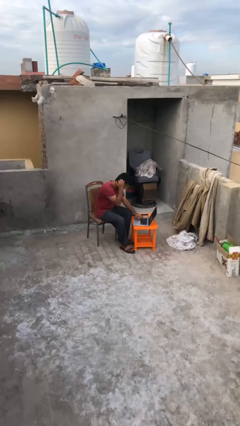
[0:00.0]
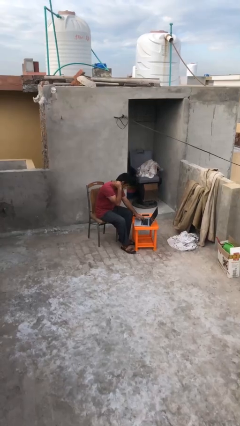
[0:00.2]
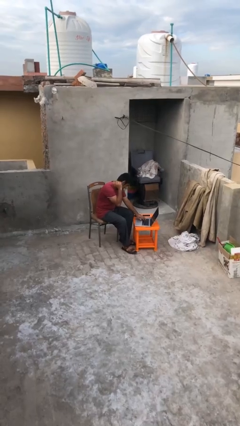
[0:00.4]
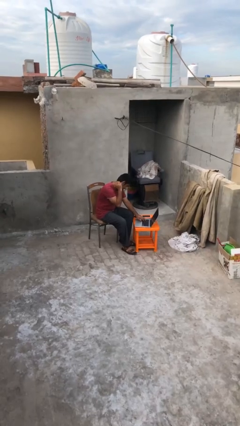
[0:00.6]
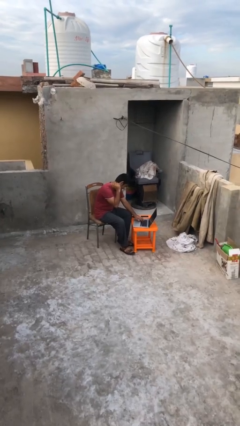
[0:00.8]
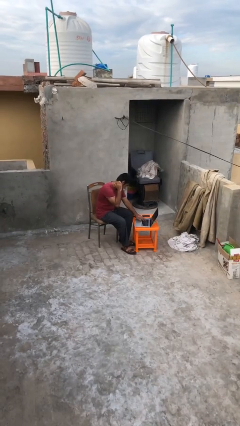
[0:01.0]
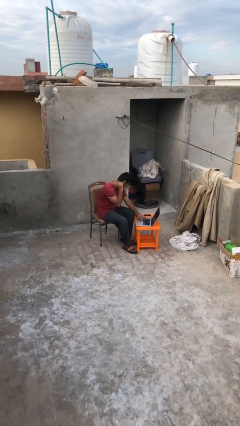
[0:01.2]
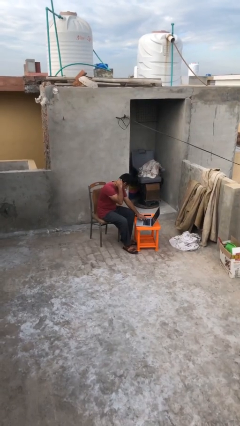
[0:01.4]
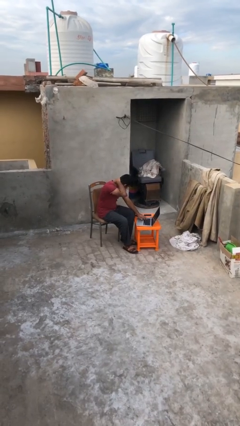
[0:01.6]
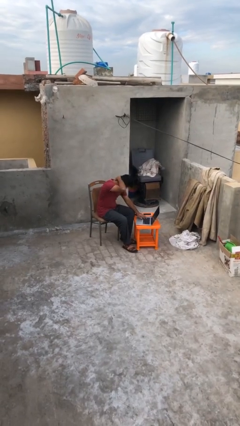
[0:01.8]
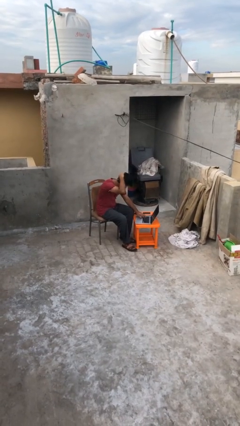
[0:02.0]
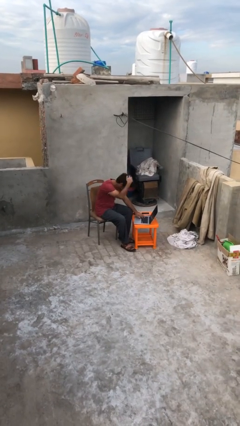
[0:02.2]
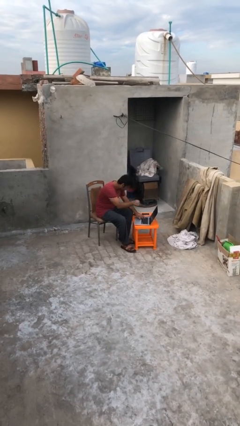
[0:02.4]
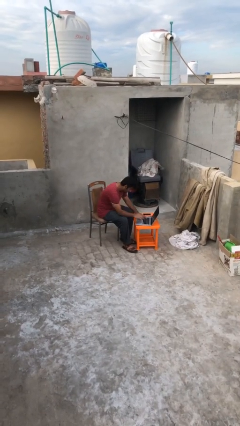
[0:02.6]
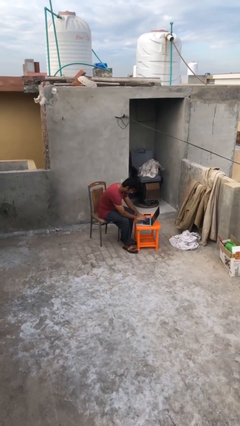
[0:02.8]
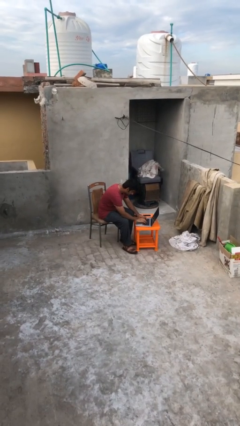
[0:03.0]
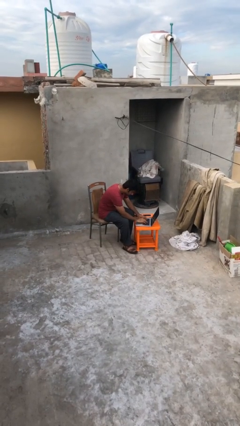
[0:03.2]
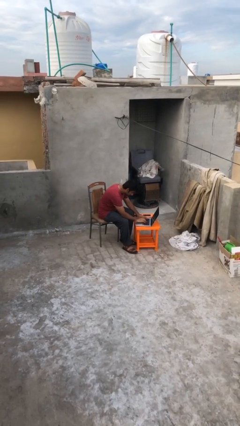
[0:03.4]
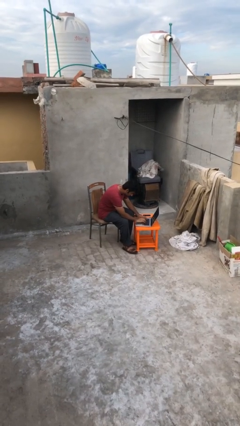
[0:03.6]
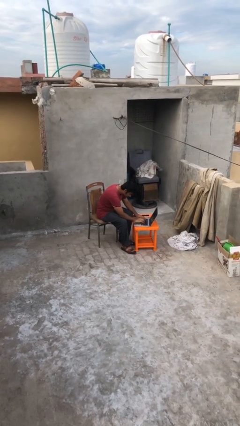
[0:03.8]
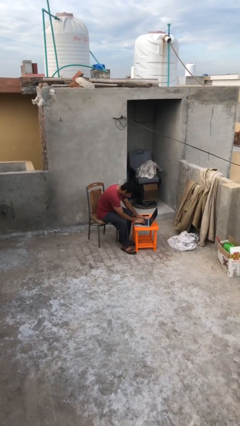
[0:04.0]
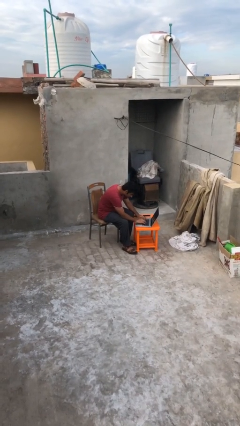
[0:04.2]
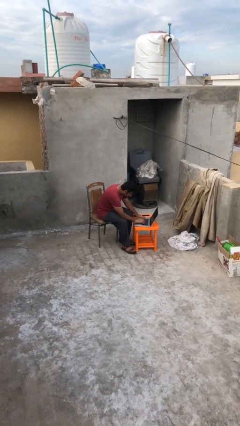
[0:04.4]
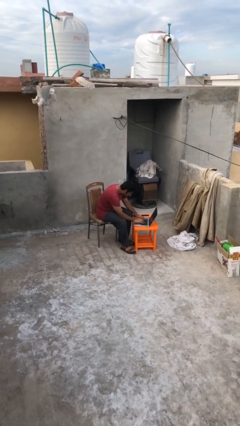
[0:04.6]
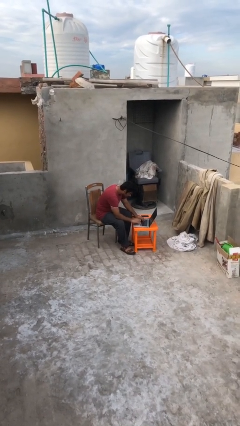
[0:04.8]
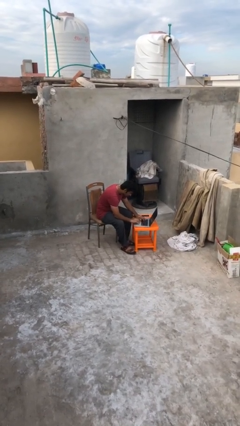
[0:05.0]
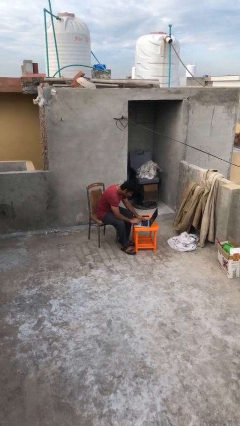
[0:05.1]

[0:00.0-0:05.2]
person interacts with laptop

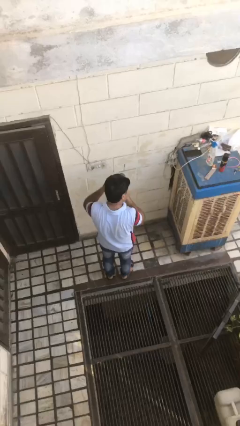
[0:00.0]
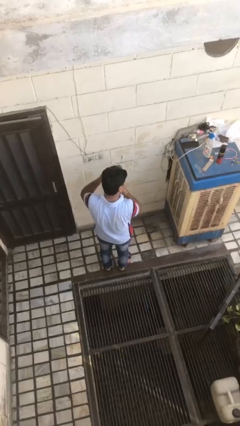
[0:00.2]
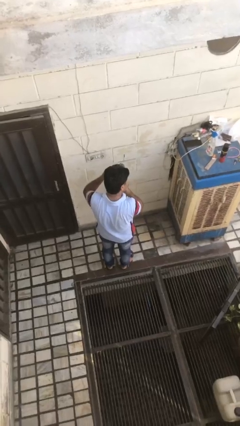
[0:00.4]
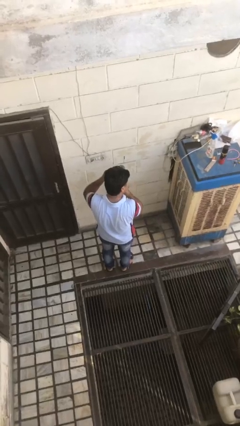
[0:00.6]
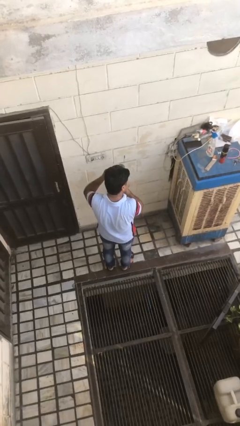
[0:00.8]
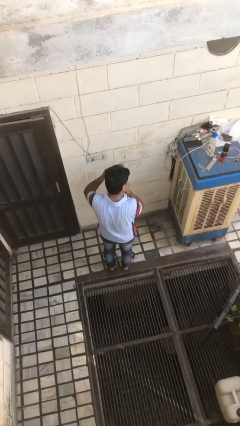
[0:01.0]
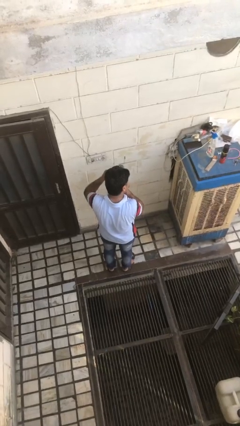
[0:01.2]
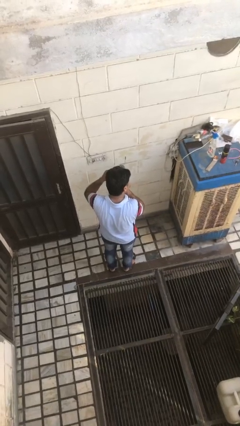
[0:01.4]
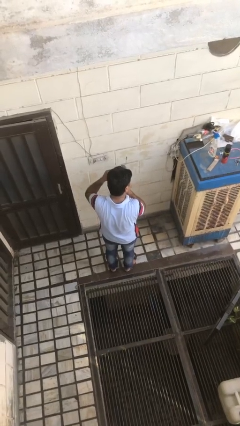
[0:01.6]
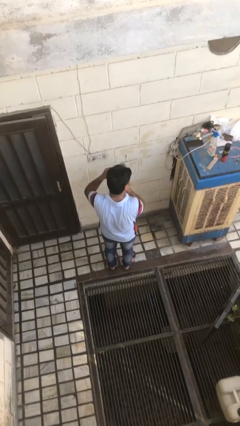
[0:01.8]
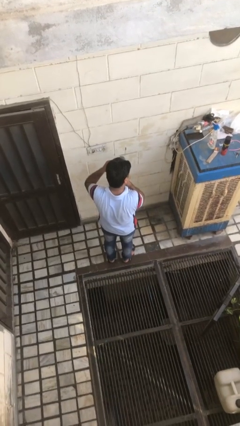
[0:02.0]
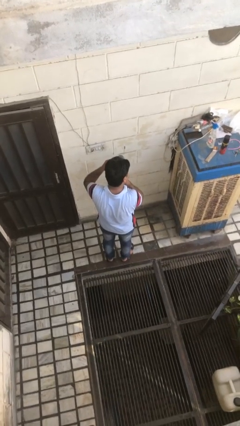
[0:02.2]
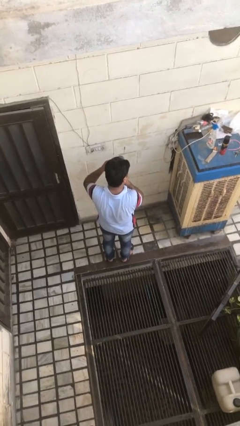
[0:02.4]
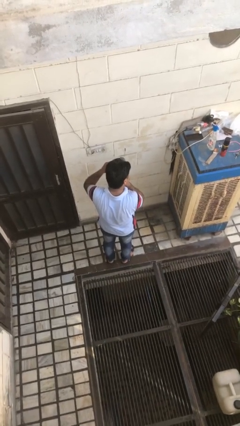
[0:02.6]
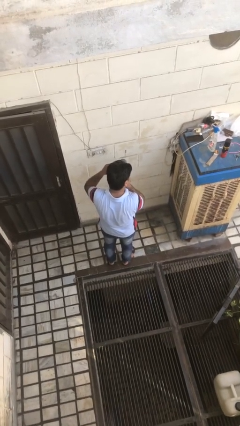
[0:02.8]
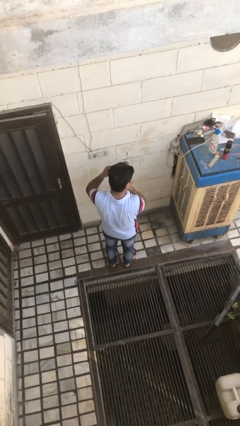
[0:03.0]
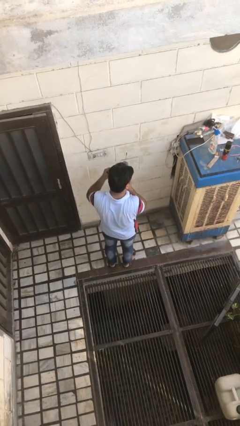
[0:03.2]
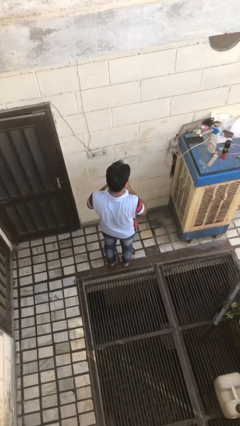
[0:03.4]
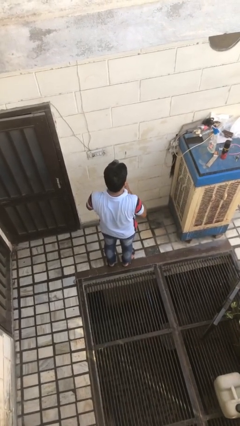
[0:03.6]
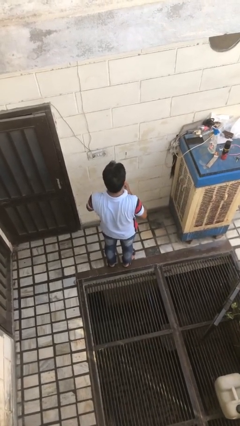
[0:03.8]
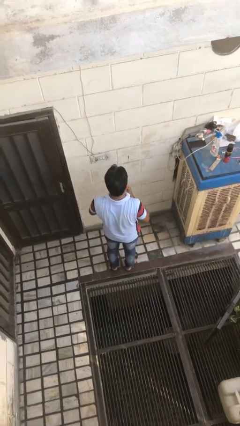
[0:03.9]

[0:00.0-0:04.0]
person applies eye makeup

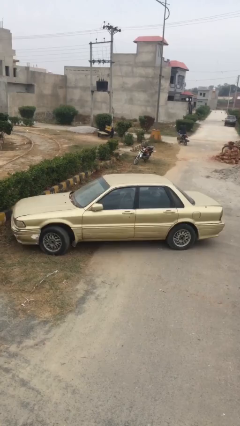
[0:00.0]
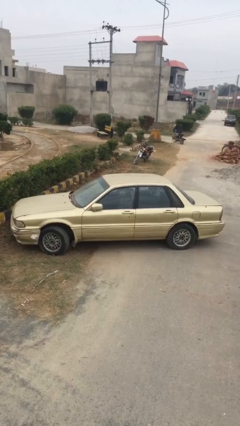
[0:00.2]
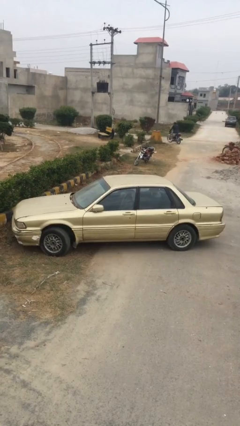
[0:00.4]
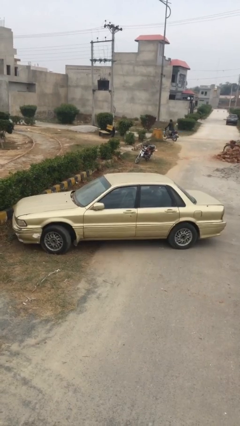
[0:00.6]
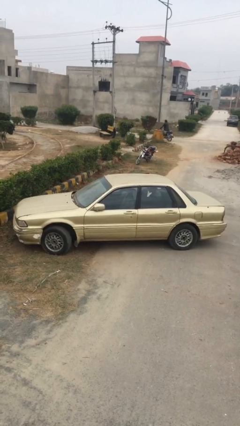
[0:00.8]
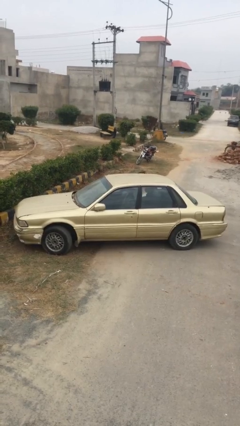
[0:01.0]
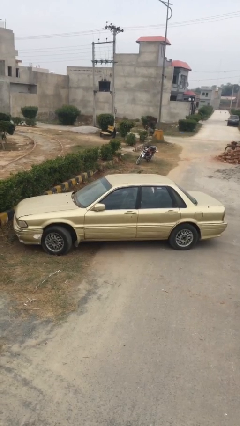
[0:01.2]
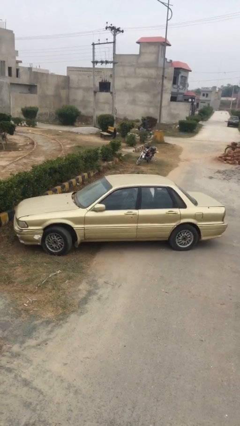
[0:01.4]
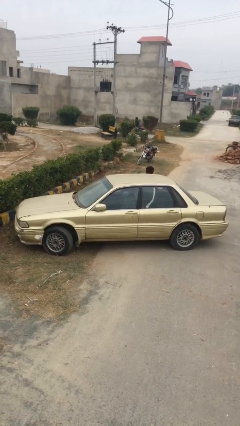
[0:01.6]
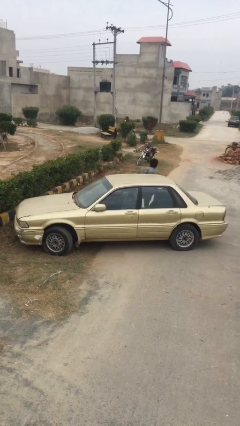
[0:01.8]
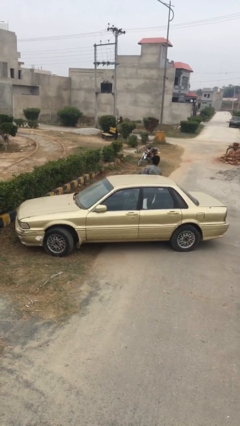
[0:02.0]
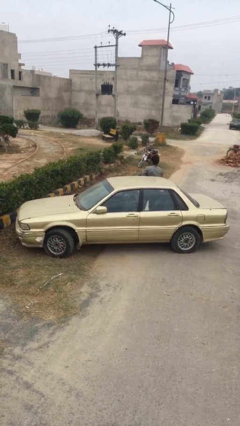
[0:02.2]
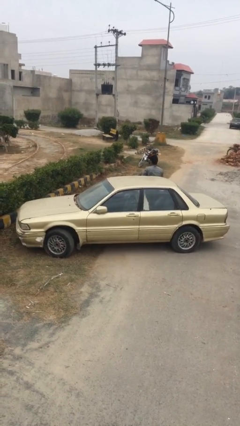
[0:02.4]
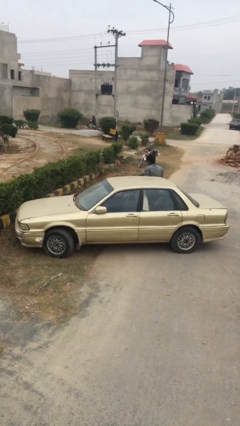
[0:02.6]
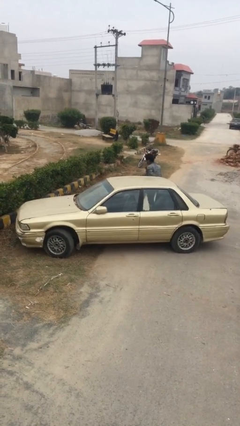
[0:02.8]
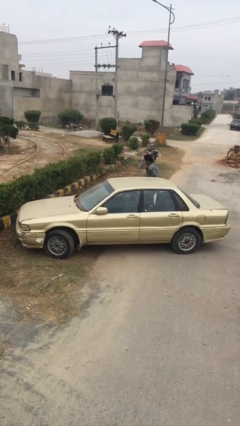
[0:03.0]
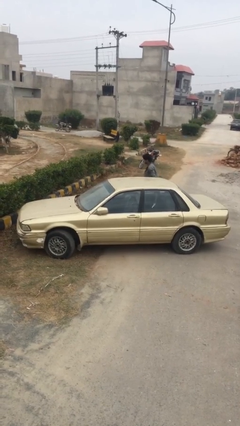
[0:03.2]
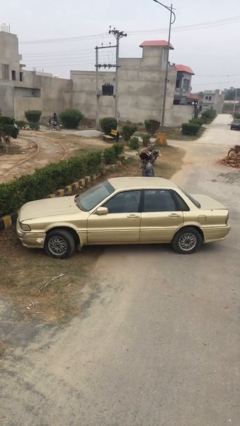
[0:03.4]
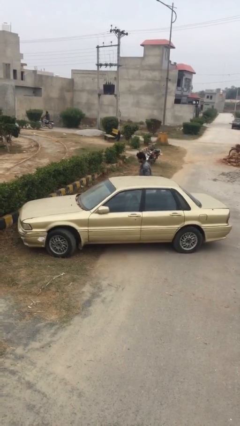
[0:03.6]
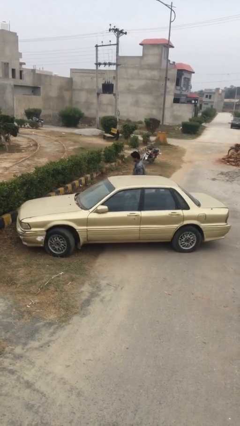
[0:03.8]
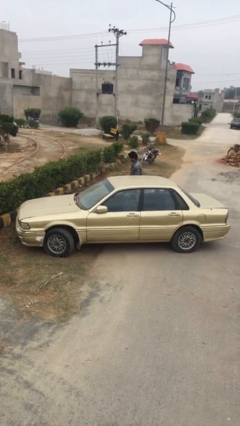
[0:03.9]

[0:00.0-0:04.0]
car drops off person

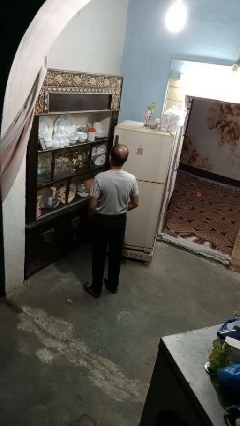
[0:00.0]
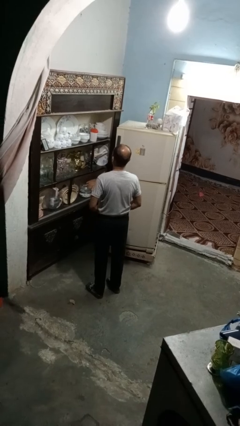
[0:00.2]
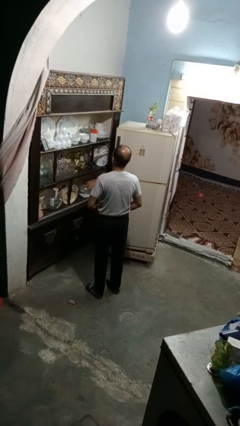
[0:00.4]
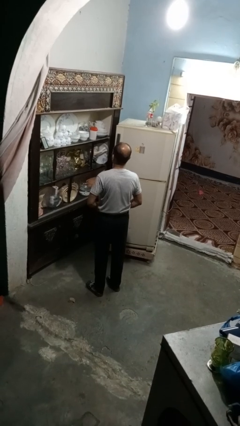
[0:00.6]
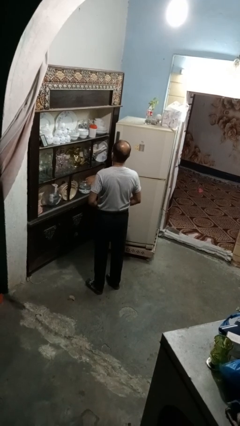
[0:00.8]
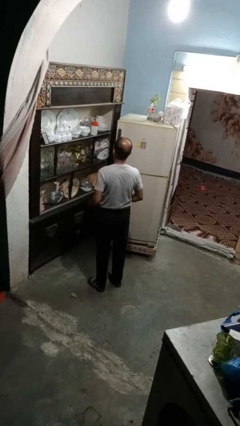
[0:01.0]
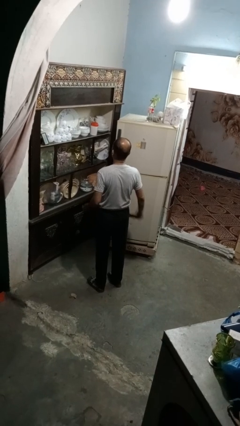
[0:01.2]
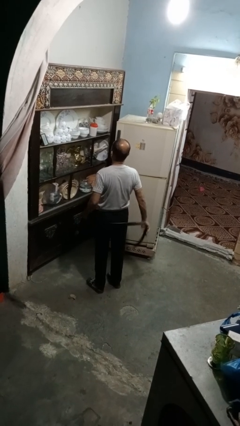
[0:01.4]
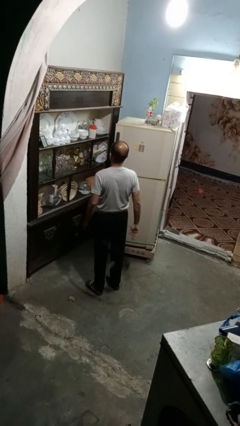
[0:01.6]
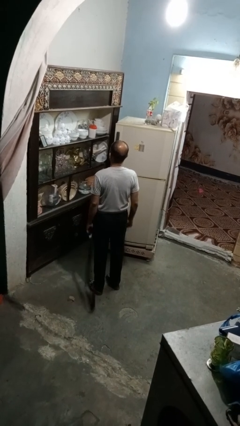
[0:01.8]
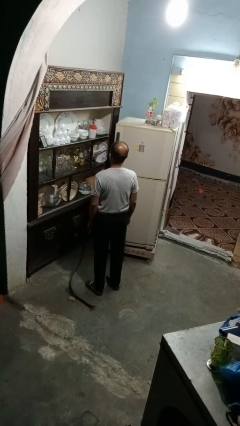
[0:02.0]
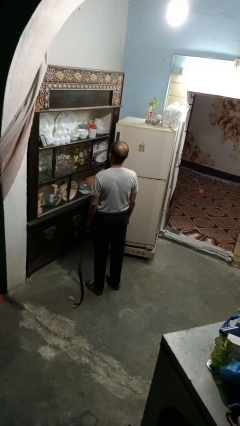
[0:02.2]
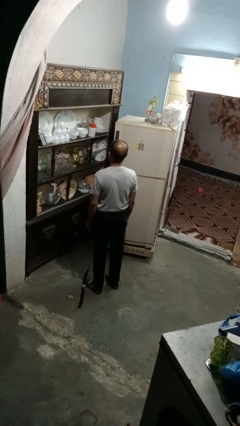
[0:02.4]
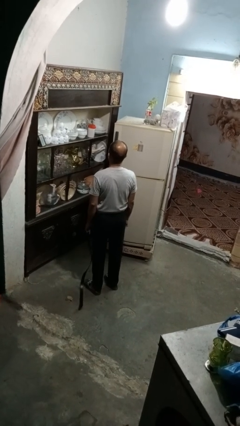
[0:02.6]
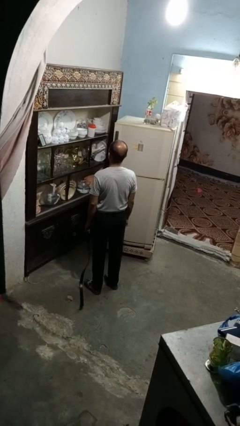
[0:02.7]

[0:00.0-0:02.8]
person takes off belt

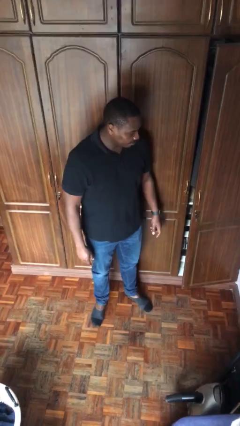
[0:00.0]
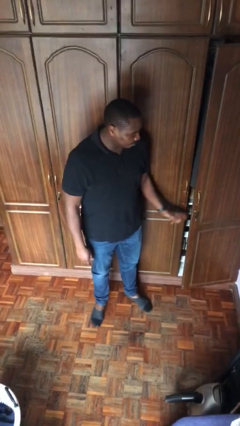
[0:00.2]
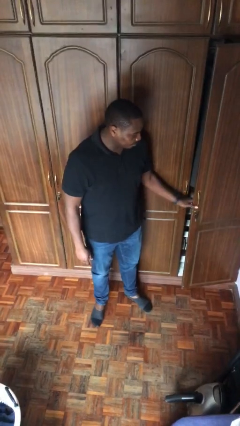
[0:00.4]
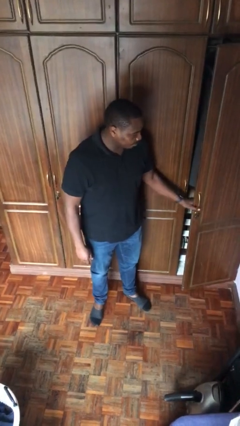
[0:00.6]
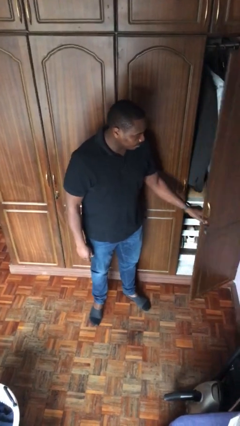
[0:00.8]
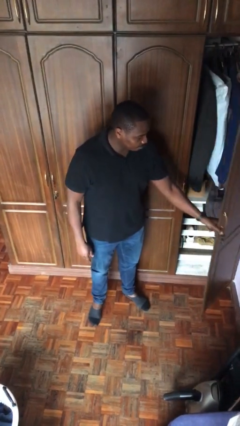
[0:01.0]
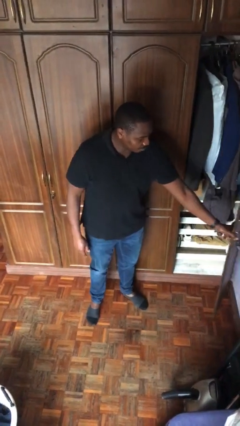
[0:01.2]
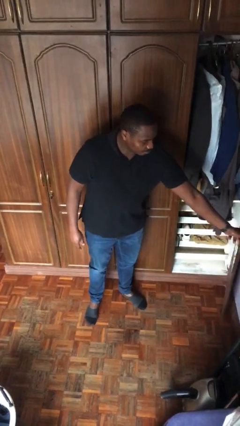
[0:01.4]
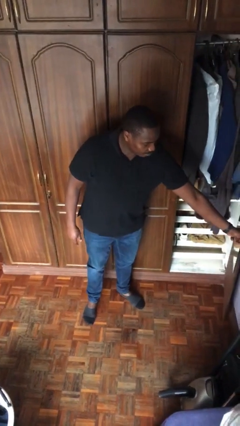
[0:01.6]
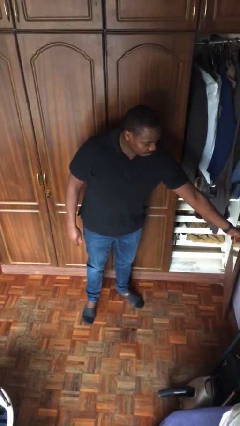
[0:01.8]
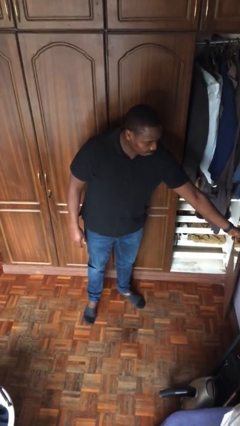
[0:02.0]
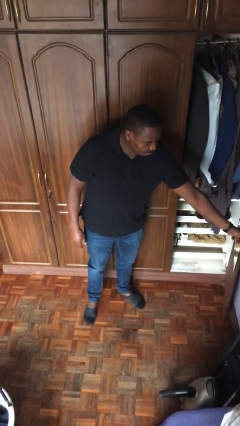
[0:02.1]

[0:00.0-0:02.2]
person opens closet door
